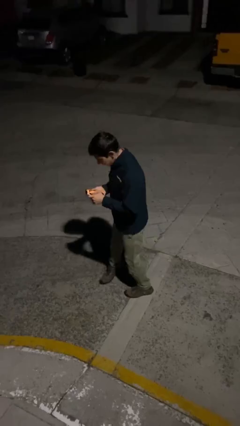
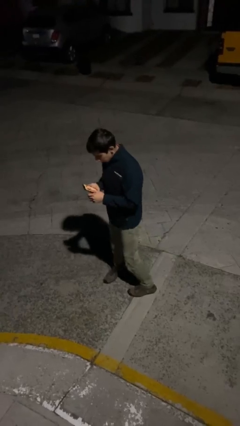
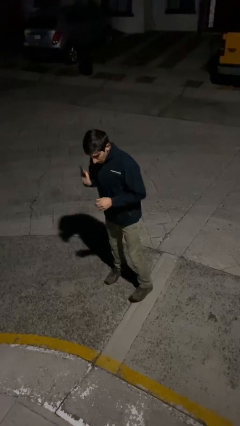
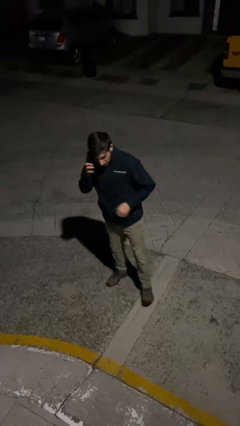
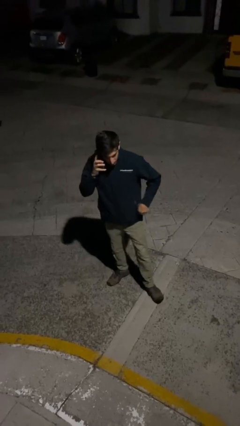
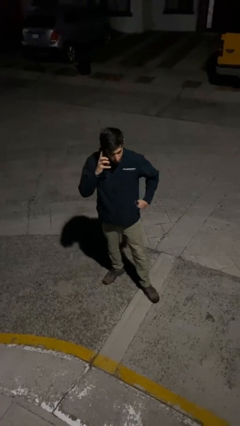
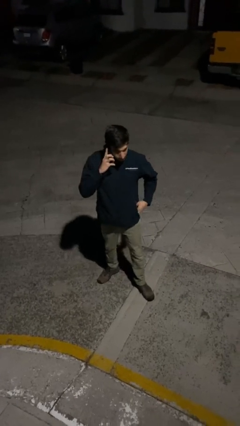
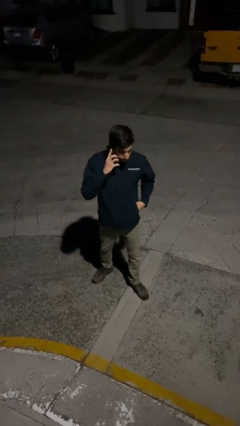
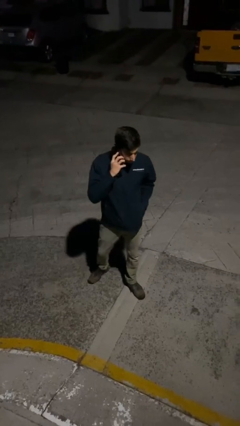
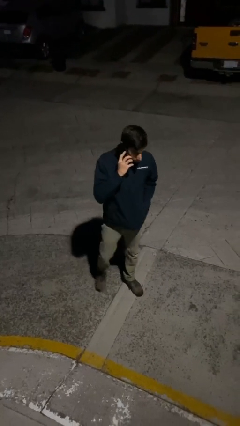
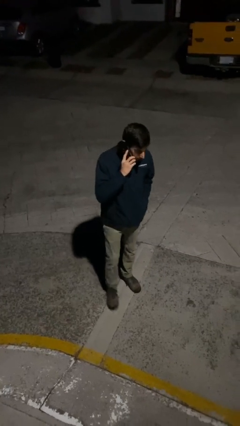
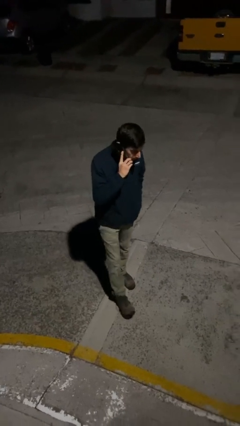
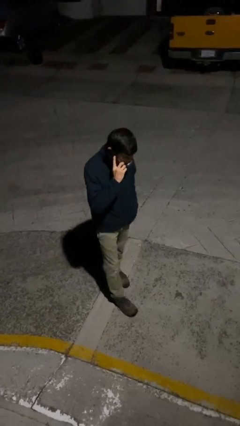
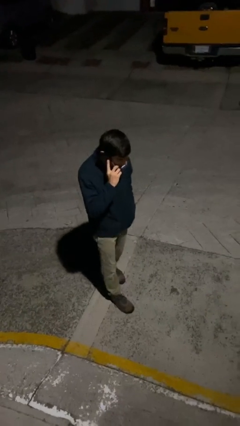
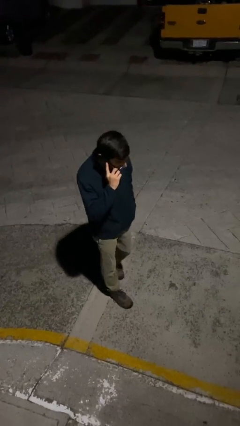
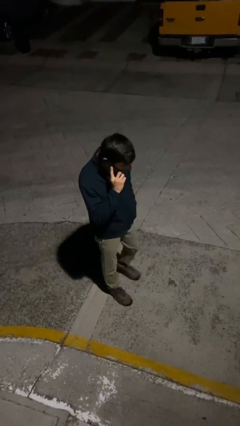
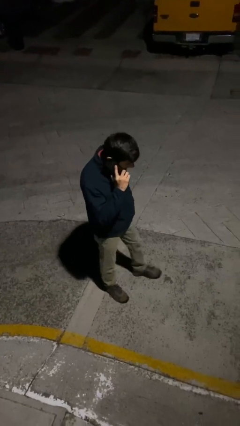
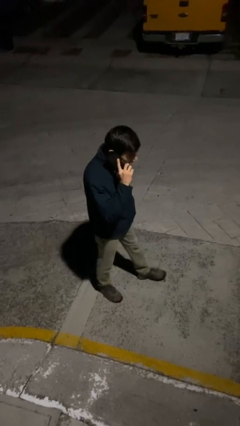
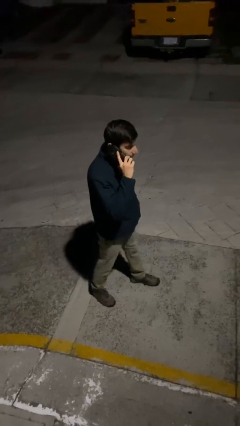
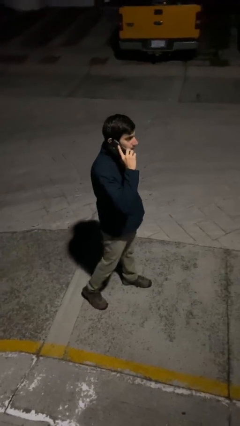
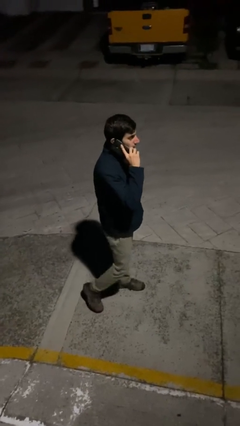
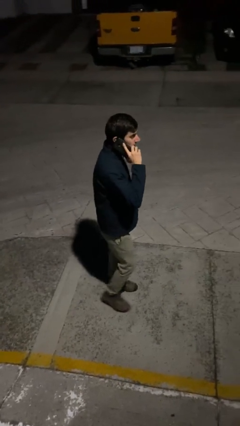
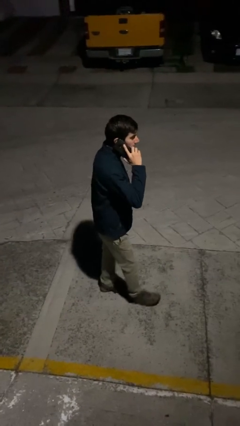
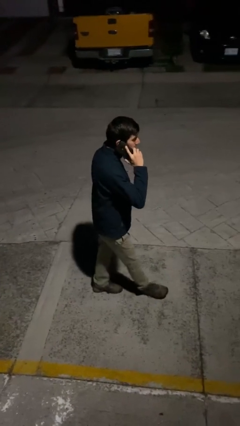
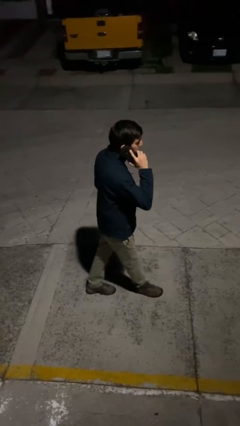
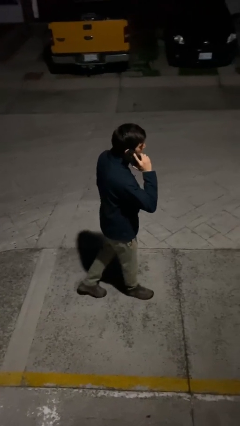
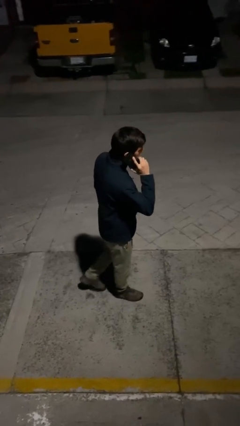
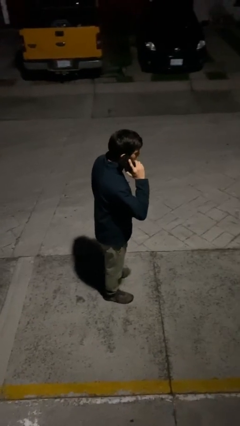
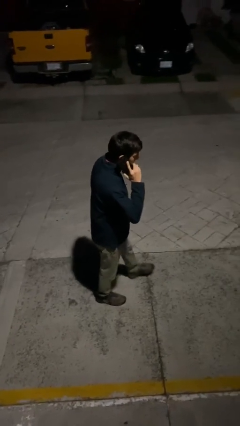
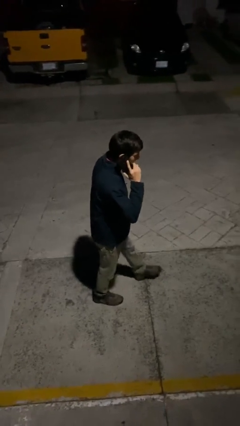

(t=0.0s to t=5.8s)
person talks on phone

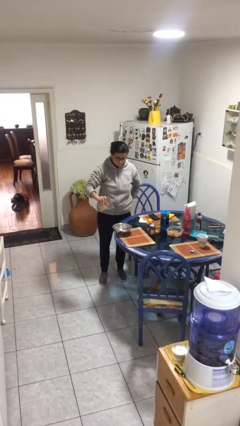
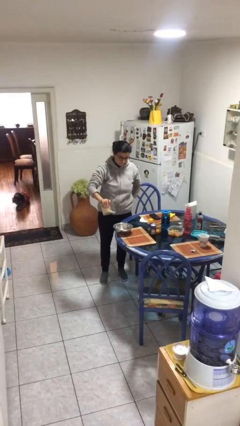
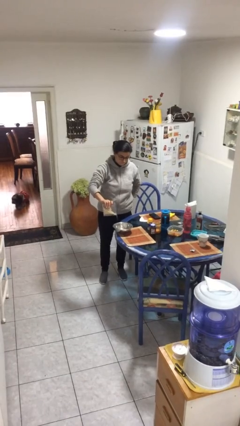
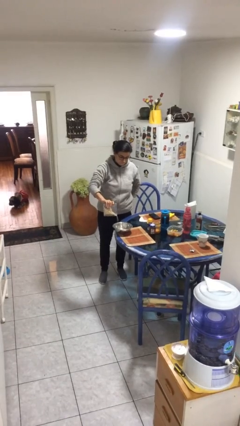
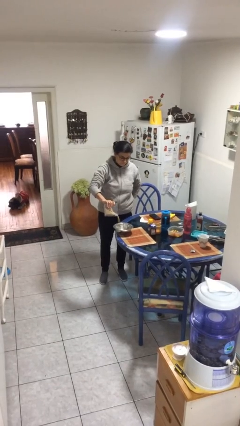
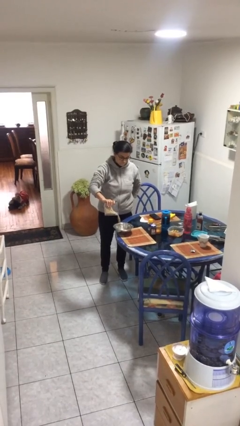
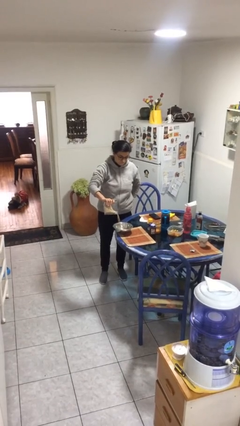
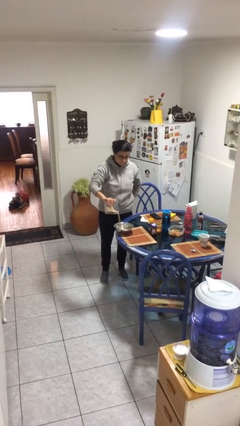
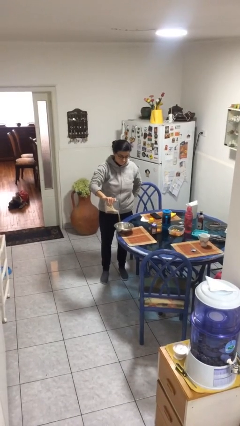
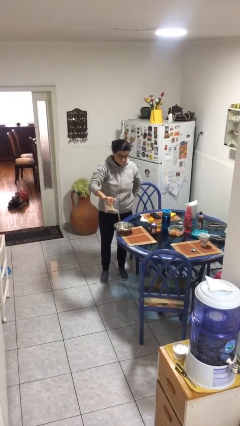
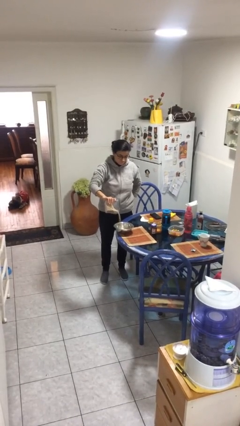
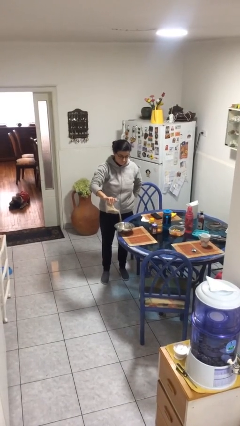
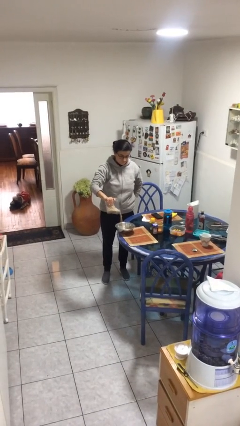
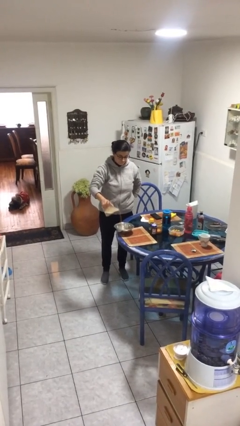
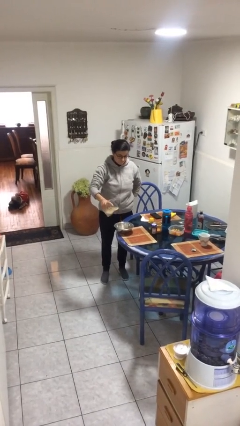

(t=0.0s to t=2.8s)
person pours into bowl

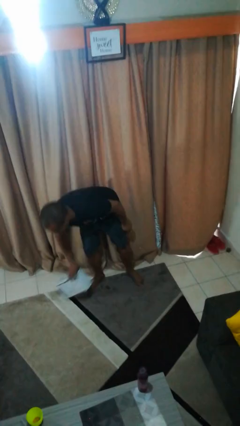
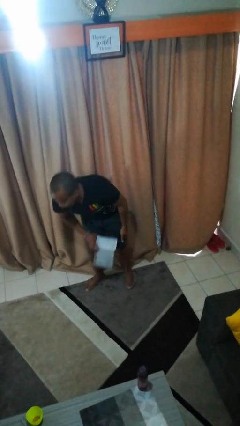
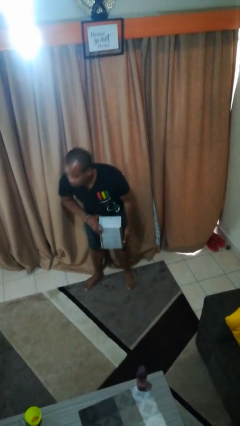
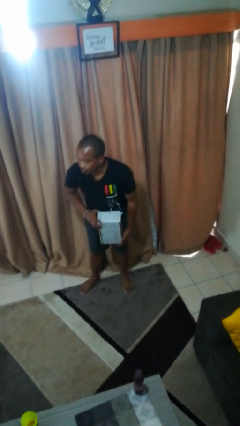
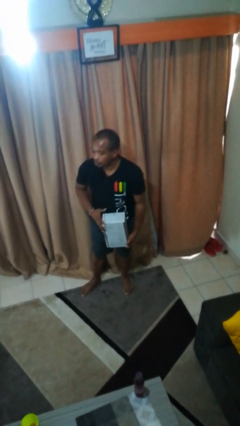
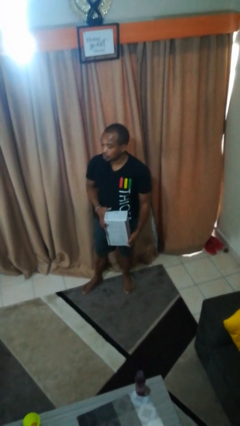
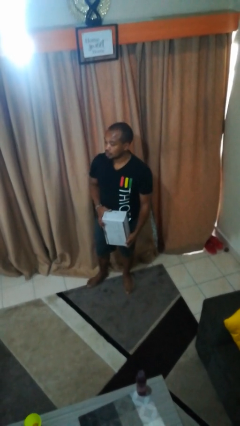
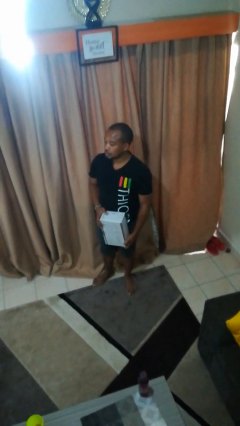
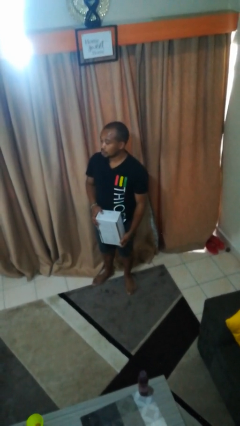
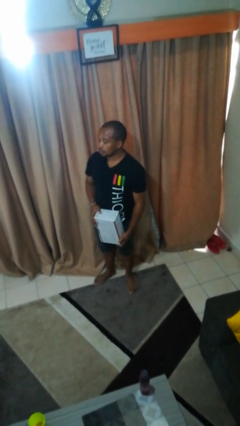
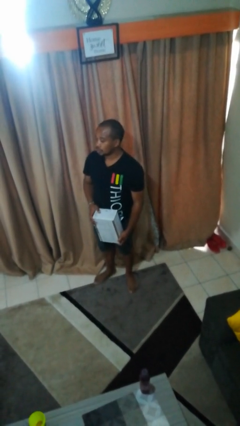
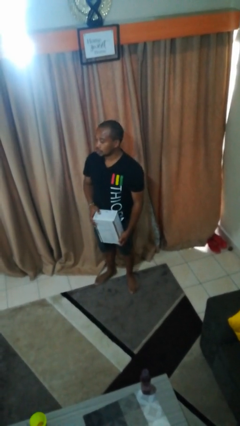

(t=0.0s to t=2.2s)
person picks up object from floor

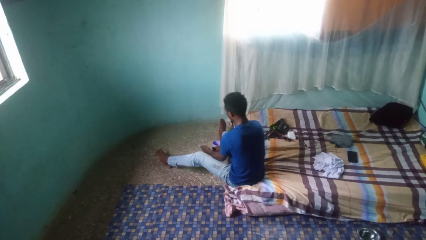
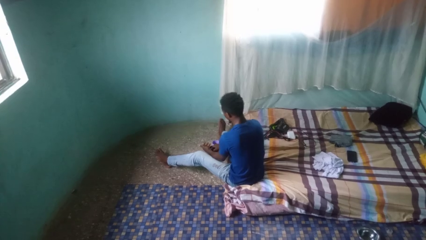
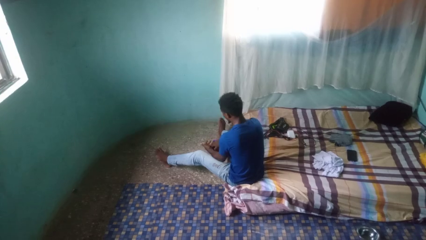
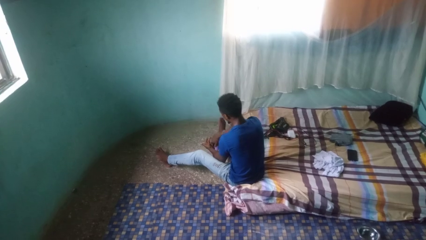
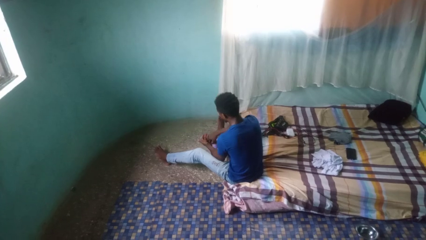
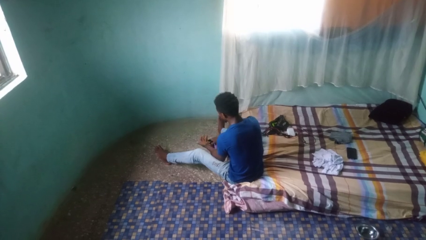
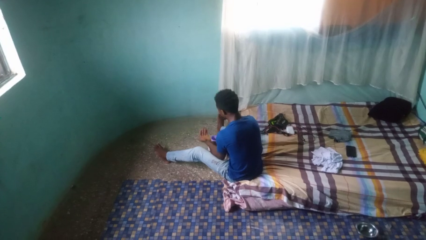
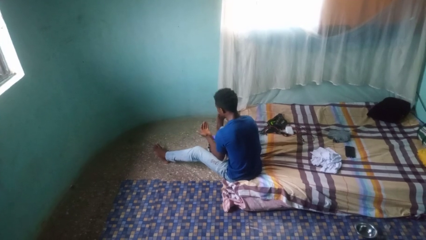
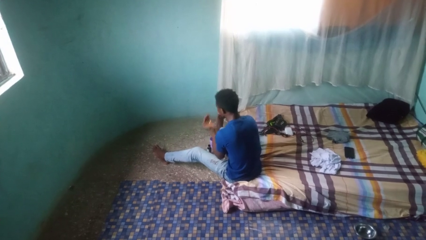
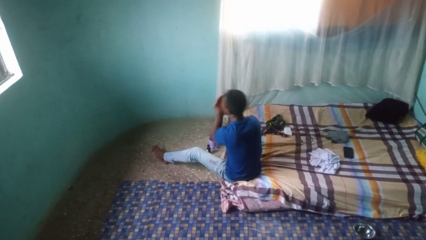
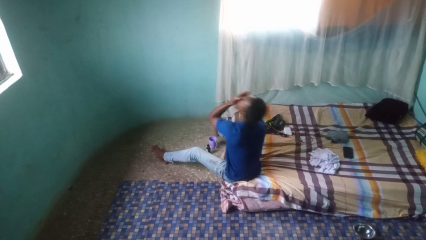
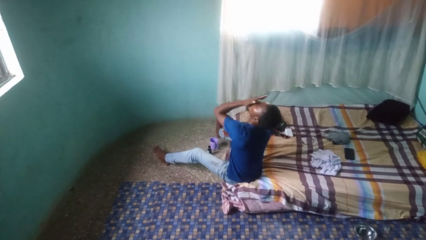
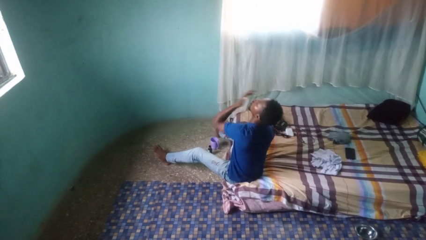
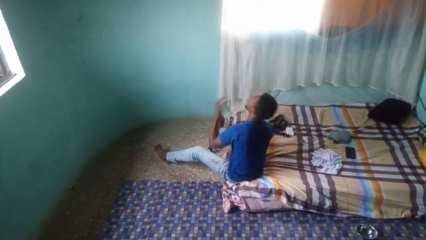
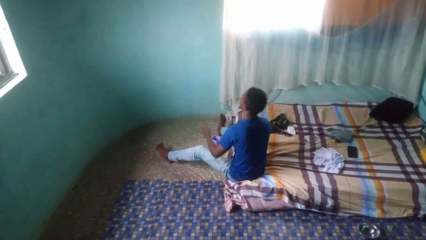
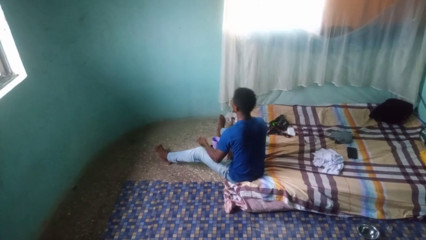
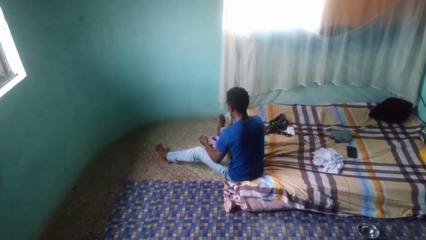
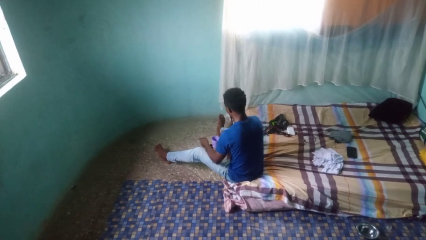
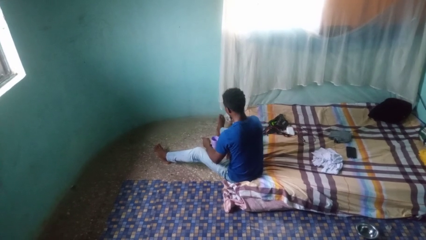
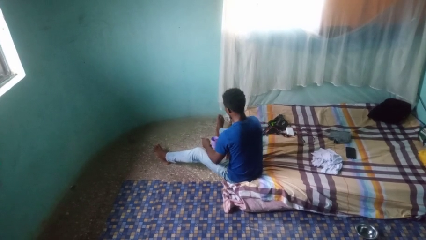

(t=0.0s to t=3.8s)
person takes medicine pills

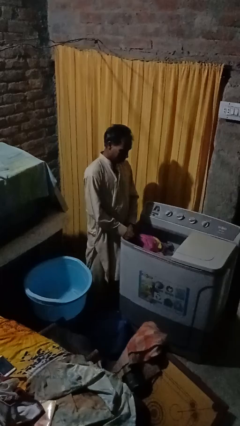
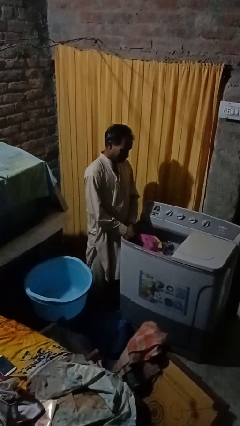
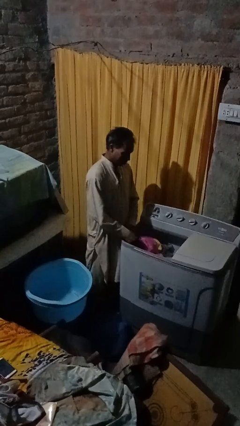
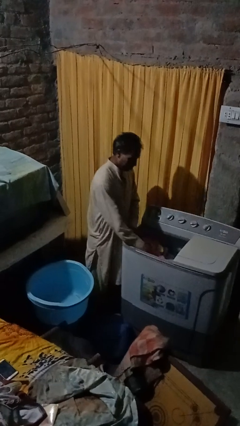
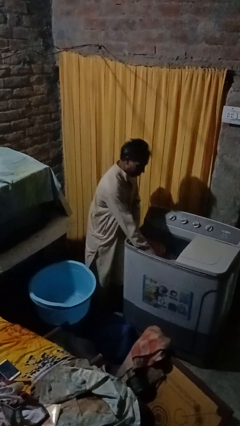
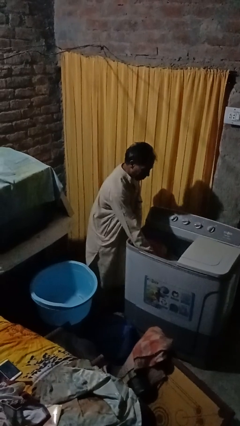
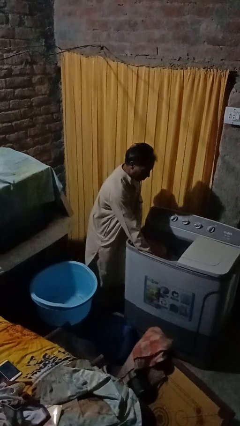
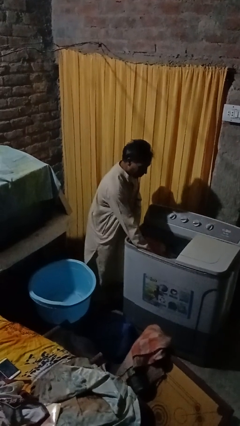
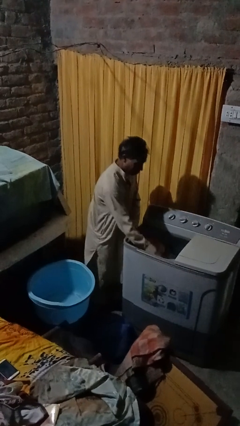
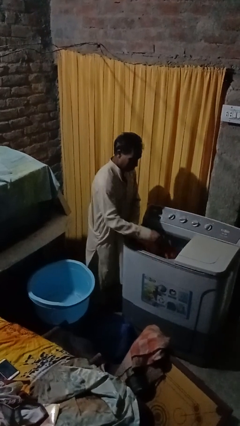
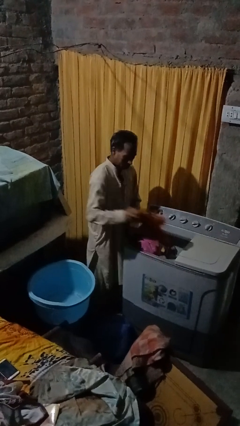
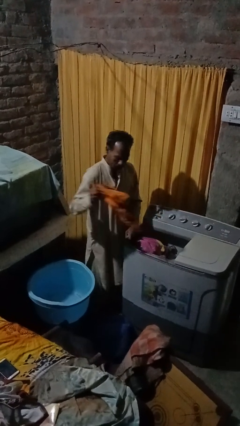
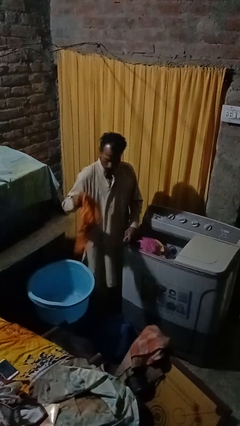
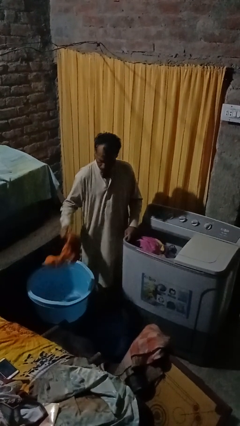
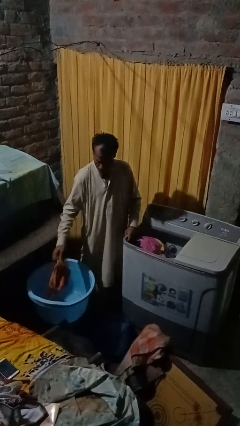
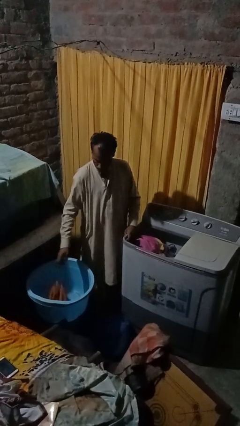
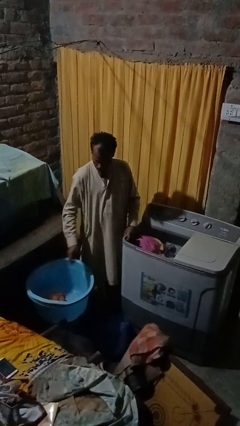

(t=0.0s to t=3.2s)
person unloads clotheswasher
